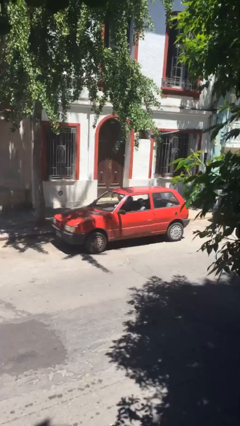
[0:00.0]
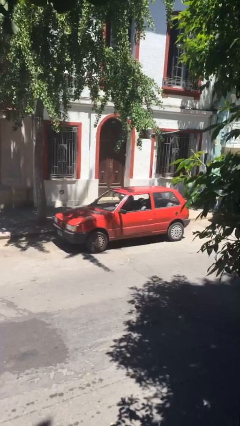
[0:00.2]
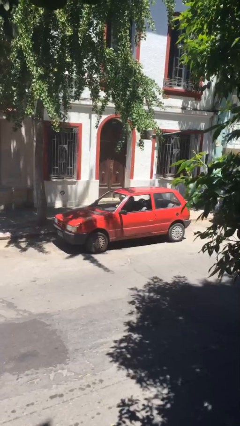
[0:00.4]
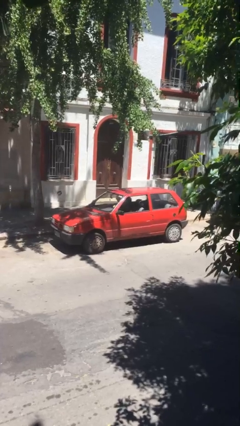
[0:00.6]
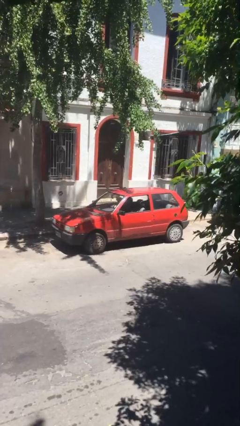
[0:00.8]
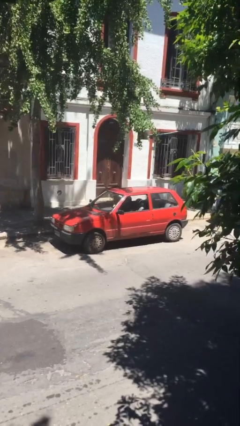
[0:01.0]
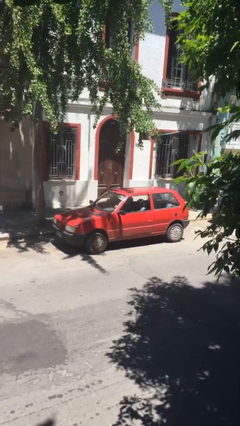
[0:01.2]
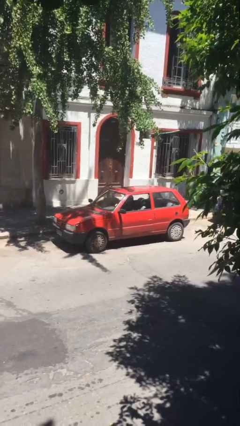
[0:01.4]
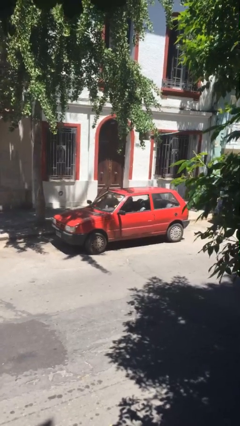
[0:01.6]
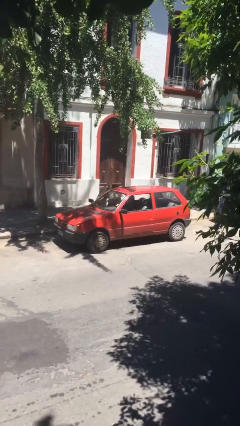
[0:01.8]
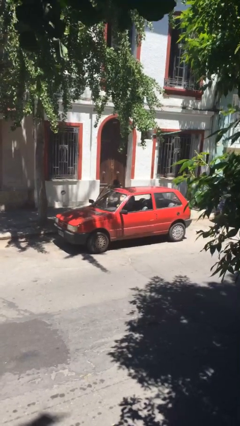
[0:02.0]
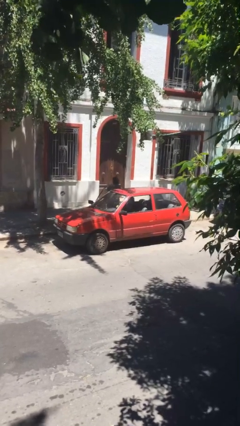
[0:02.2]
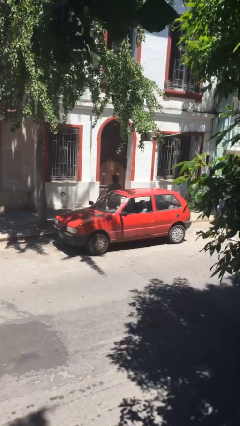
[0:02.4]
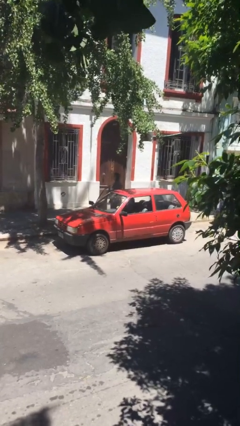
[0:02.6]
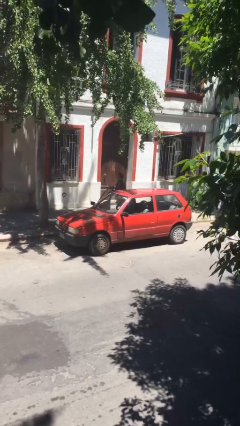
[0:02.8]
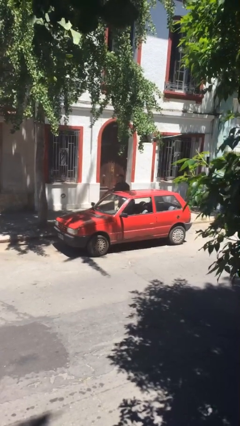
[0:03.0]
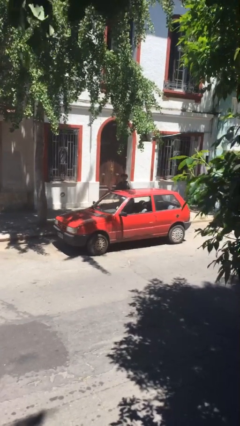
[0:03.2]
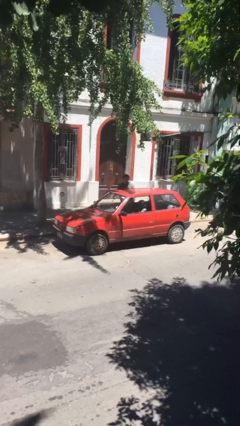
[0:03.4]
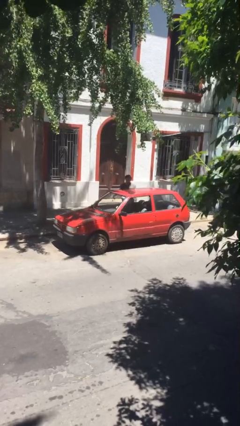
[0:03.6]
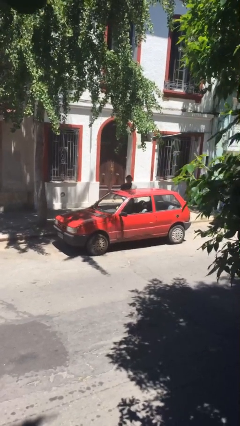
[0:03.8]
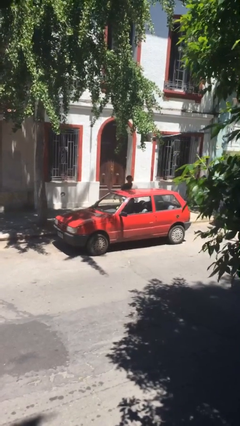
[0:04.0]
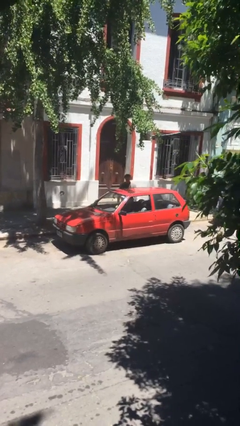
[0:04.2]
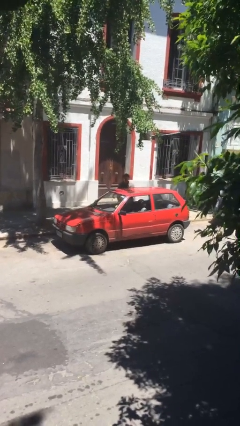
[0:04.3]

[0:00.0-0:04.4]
car drops off person

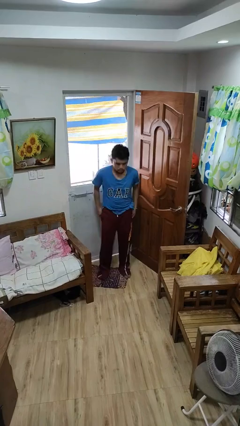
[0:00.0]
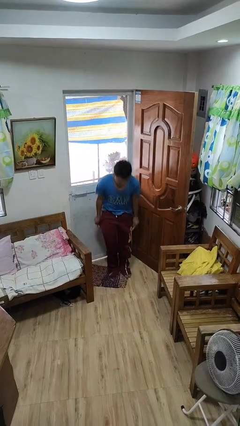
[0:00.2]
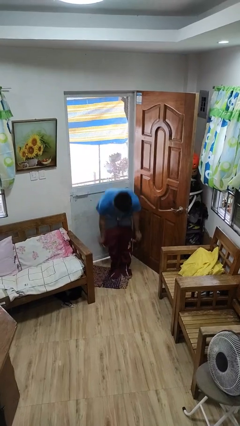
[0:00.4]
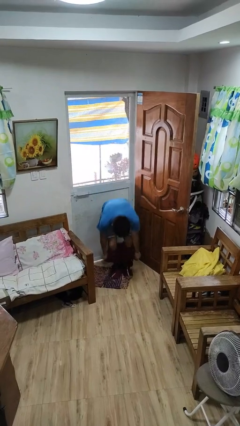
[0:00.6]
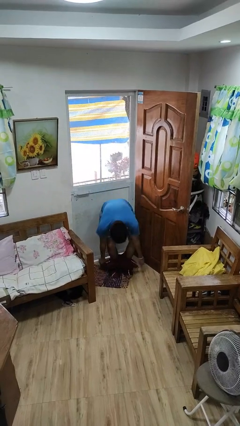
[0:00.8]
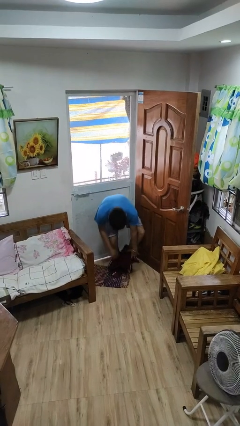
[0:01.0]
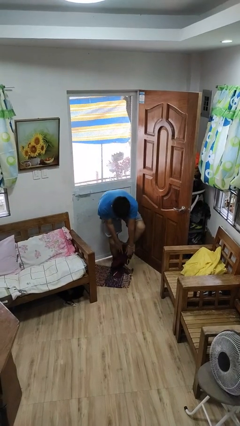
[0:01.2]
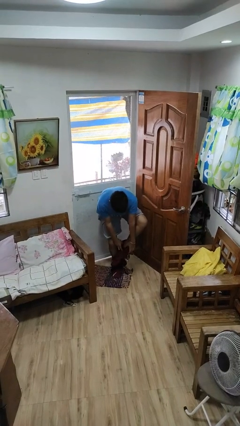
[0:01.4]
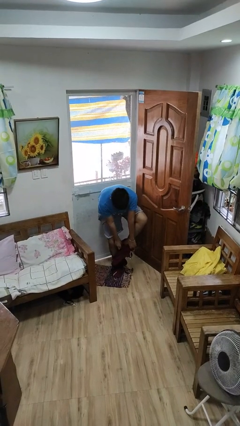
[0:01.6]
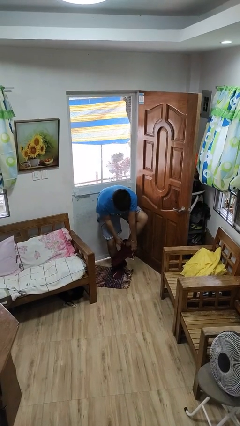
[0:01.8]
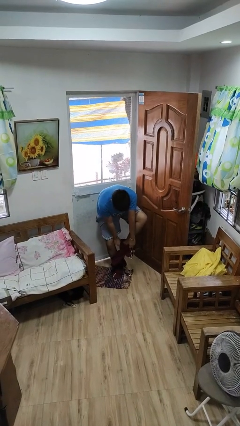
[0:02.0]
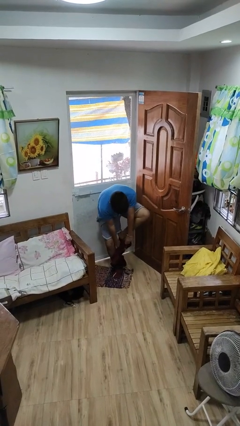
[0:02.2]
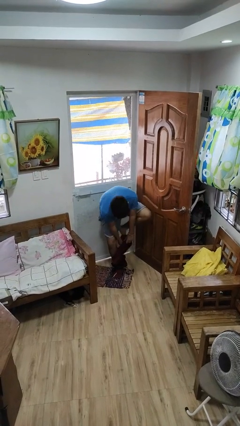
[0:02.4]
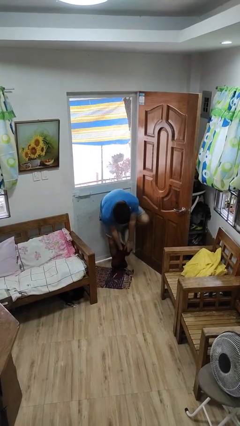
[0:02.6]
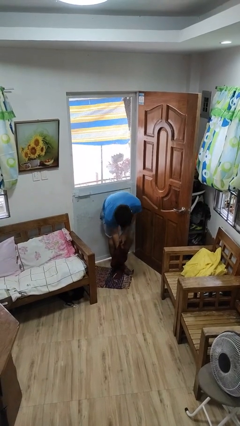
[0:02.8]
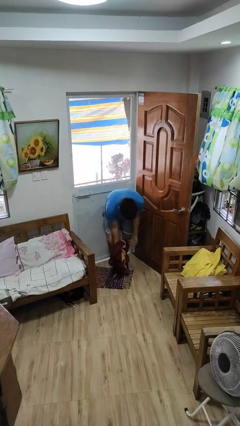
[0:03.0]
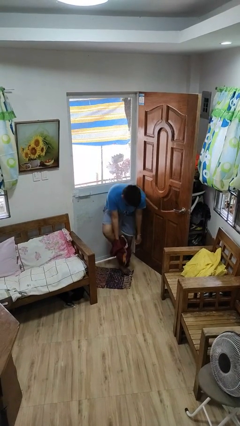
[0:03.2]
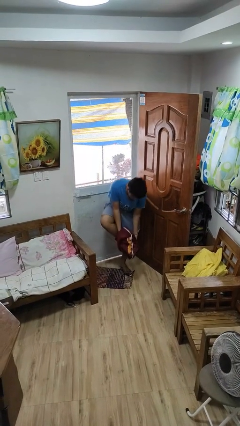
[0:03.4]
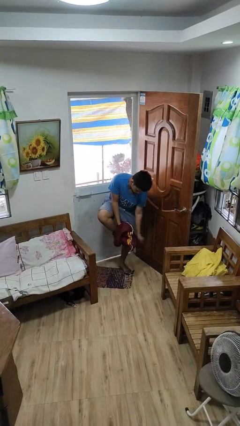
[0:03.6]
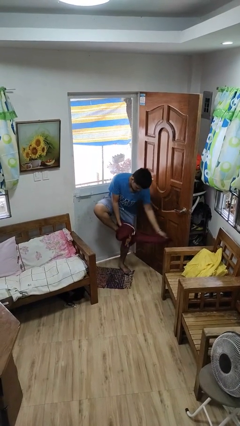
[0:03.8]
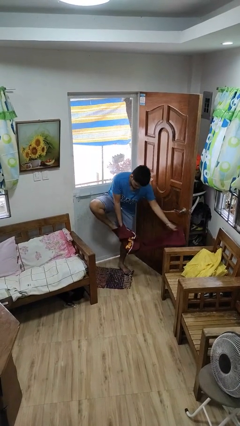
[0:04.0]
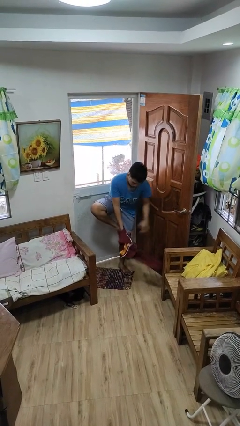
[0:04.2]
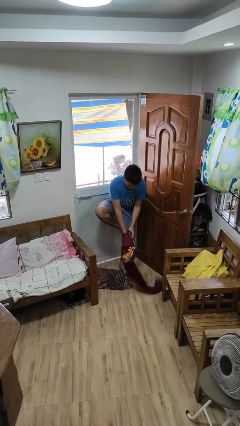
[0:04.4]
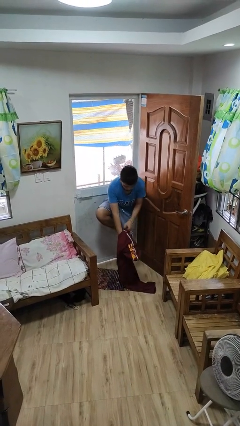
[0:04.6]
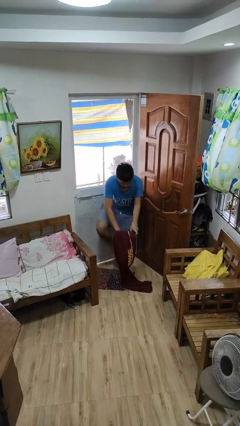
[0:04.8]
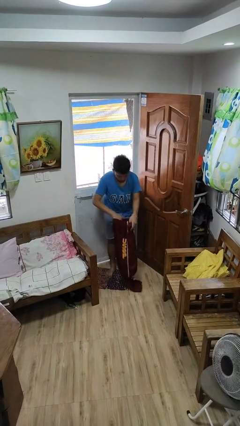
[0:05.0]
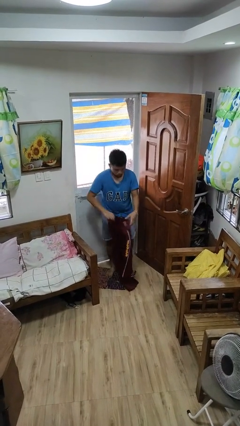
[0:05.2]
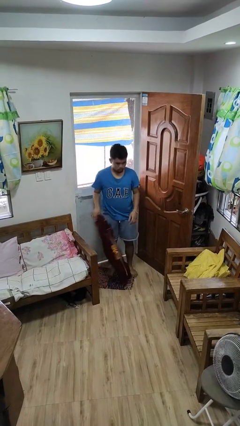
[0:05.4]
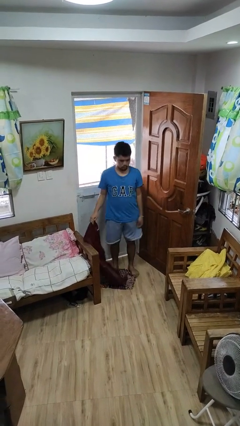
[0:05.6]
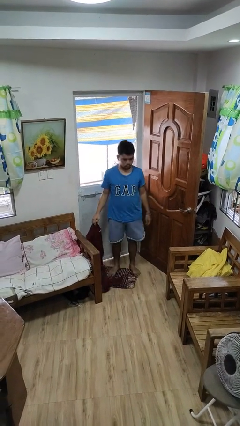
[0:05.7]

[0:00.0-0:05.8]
person takes off pants

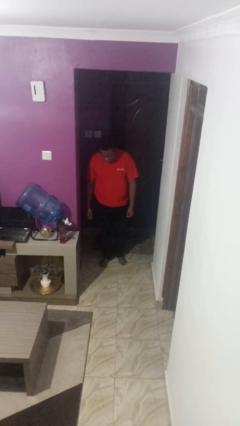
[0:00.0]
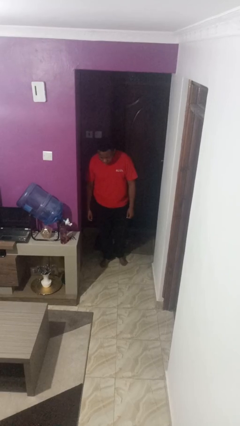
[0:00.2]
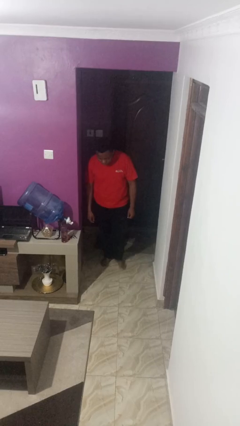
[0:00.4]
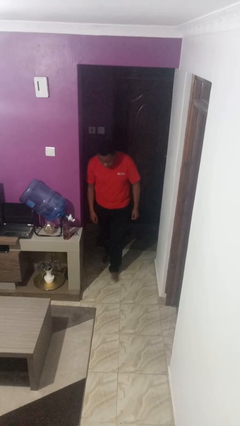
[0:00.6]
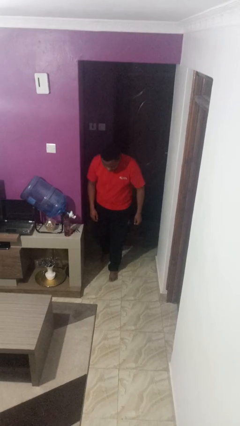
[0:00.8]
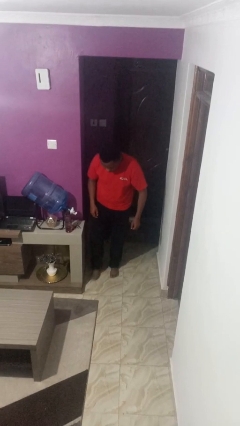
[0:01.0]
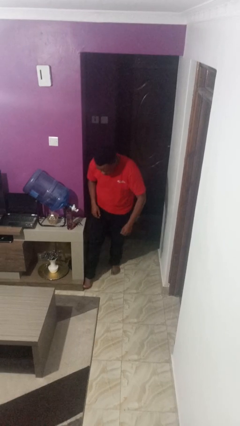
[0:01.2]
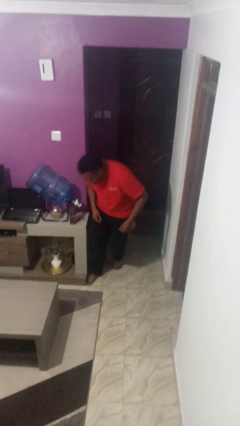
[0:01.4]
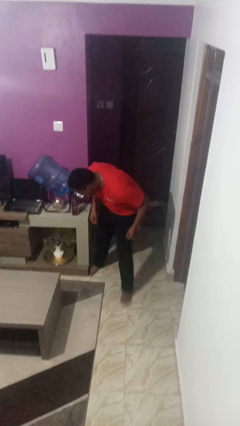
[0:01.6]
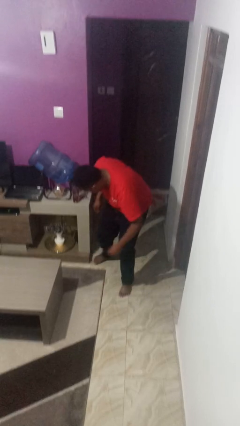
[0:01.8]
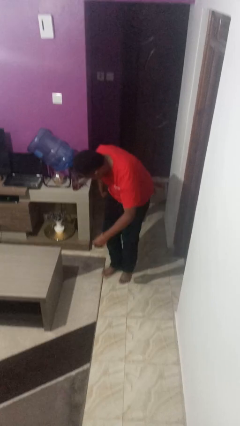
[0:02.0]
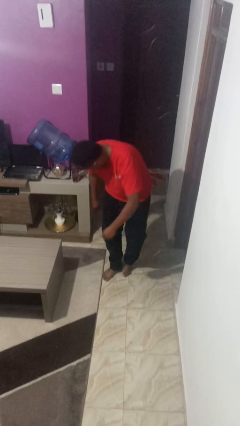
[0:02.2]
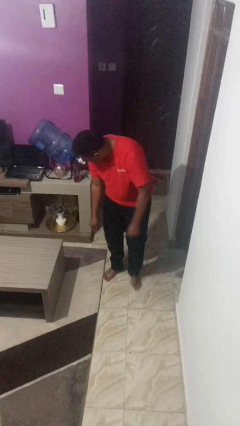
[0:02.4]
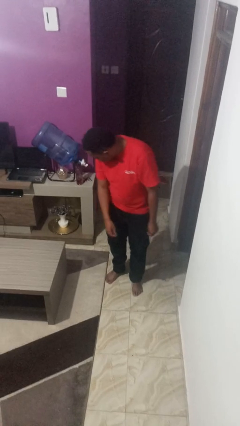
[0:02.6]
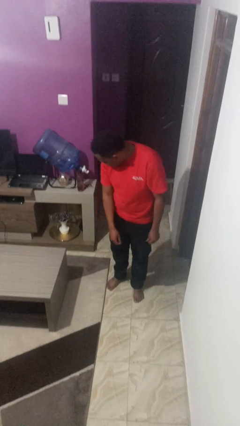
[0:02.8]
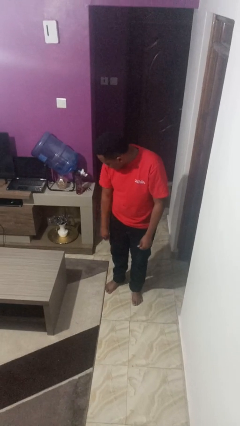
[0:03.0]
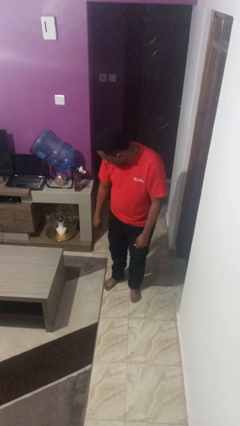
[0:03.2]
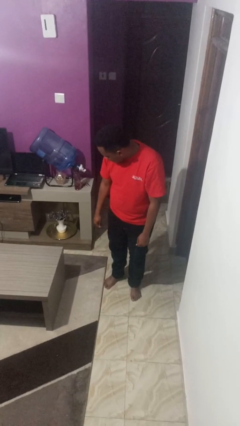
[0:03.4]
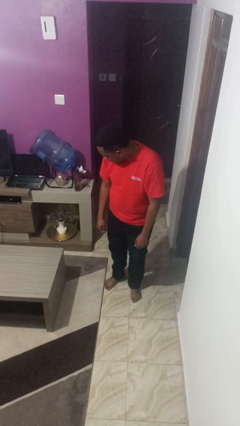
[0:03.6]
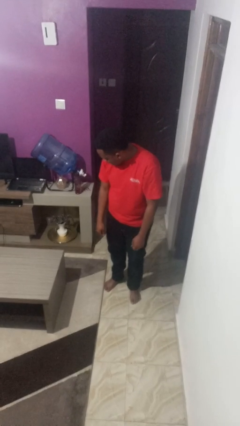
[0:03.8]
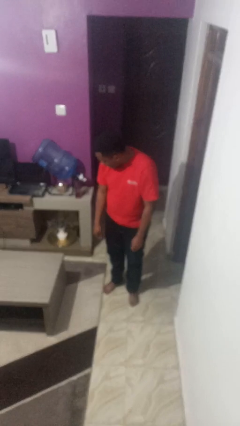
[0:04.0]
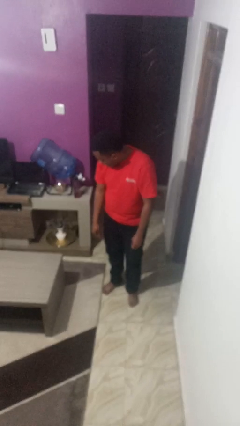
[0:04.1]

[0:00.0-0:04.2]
person stubs toe

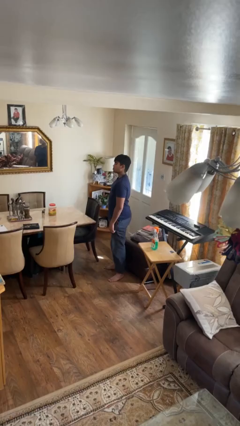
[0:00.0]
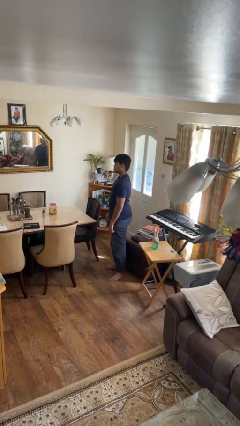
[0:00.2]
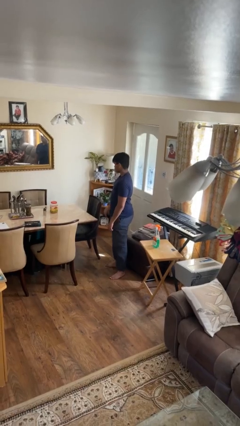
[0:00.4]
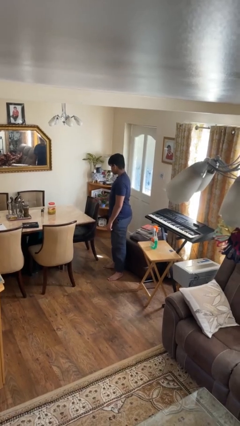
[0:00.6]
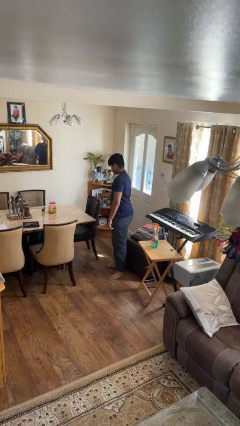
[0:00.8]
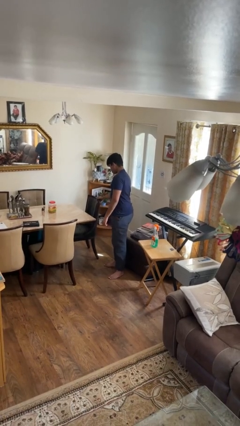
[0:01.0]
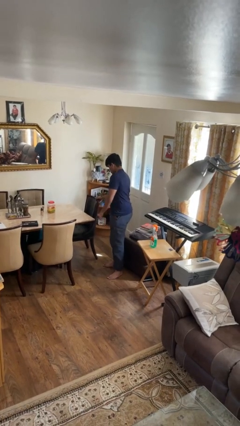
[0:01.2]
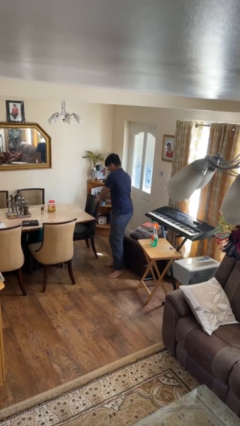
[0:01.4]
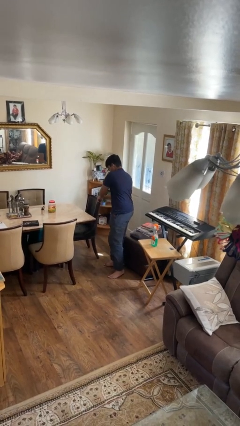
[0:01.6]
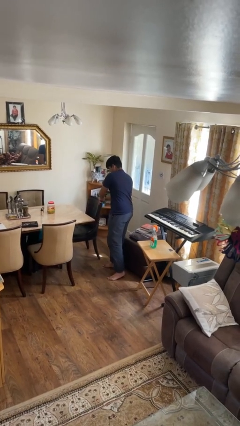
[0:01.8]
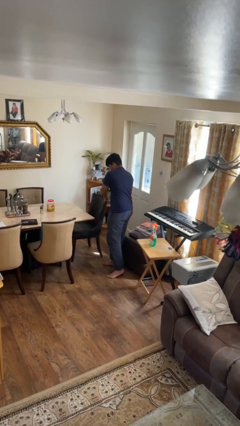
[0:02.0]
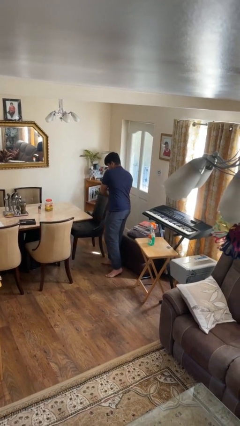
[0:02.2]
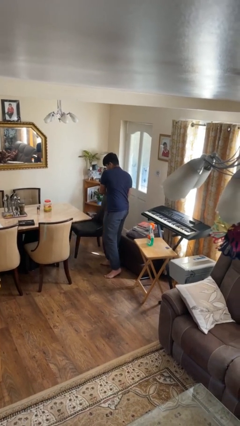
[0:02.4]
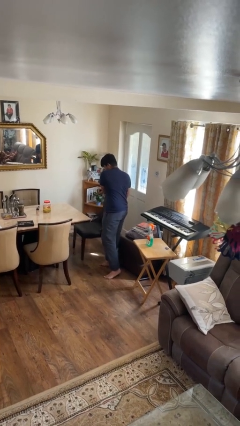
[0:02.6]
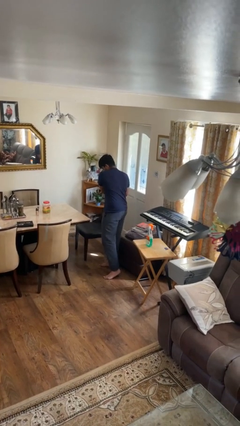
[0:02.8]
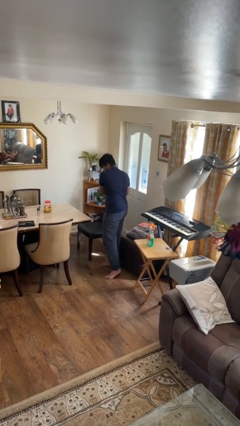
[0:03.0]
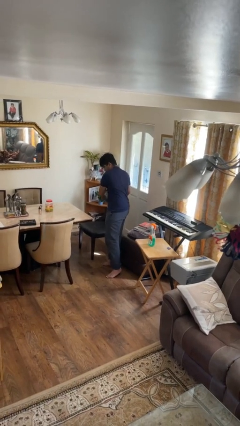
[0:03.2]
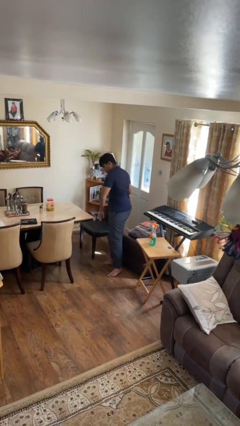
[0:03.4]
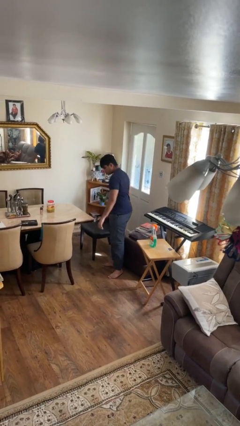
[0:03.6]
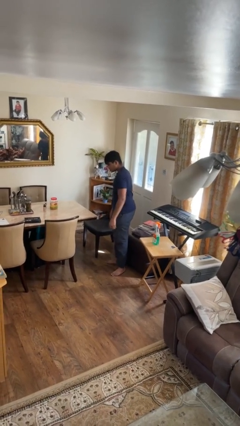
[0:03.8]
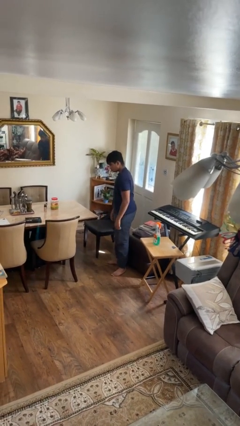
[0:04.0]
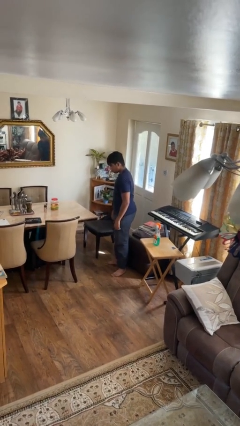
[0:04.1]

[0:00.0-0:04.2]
person pulls out chair
